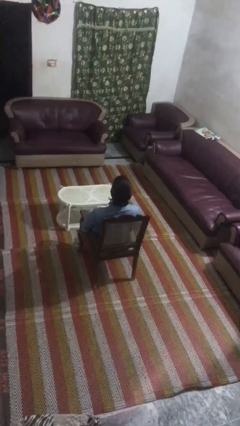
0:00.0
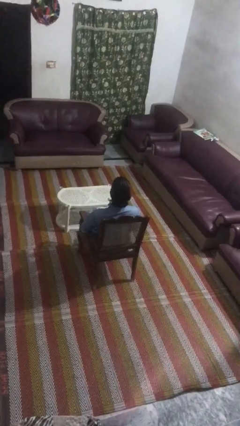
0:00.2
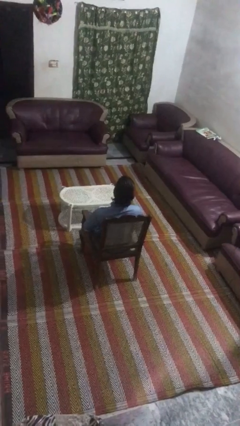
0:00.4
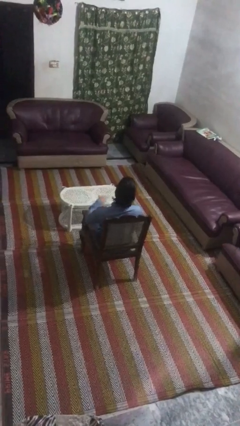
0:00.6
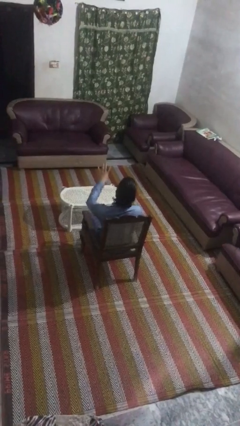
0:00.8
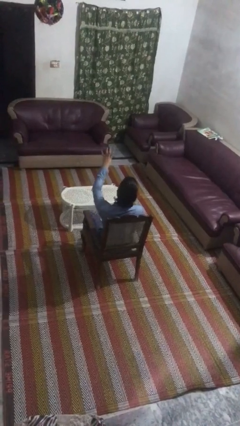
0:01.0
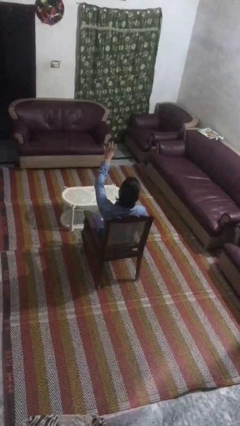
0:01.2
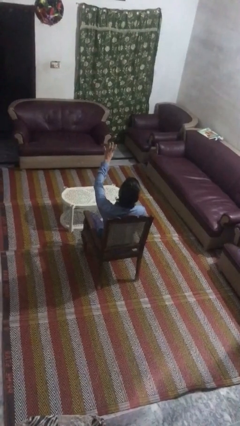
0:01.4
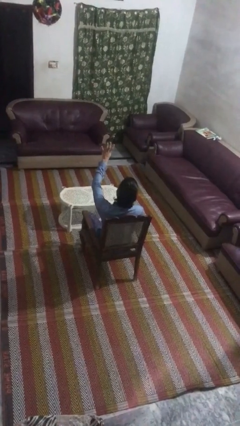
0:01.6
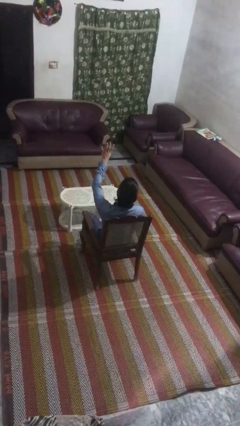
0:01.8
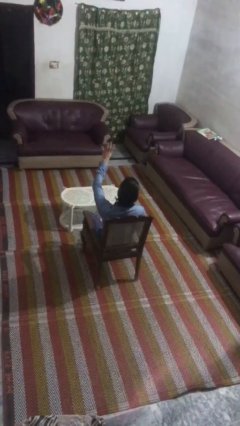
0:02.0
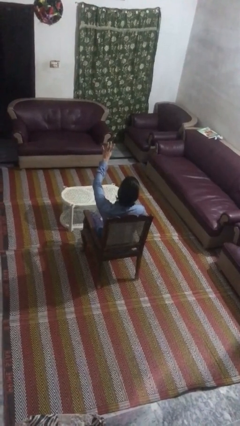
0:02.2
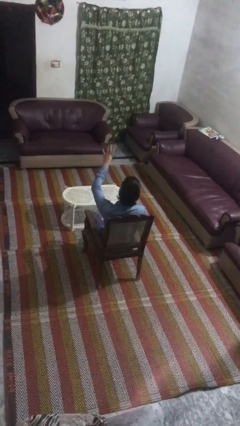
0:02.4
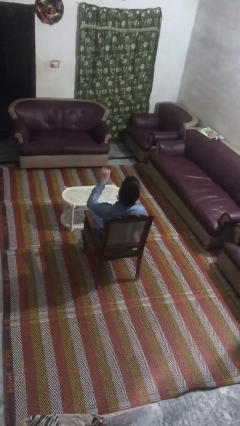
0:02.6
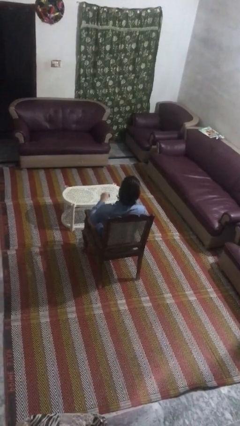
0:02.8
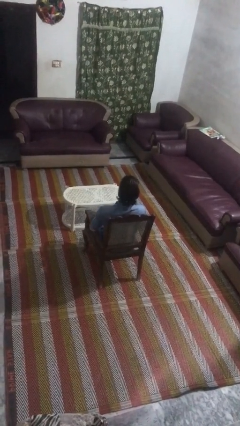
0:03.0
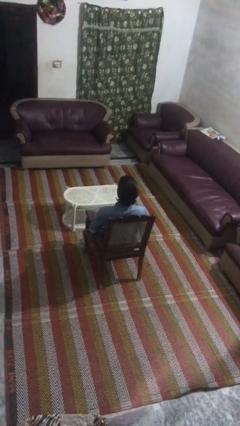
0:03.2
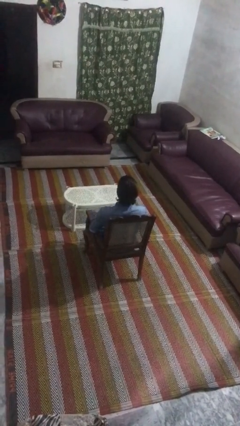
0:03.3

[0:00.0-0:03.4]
person gestures number four

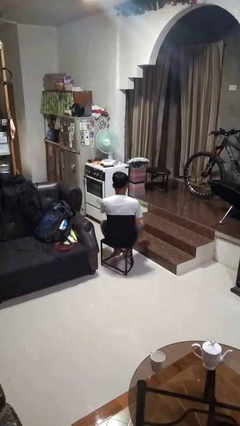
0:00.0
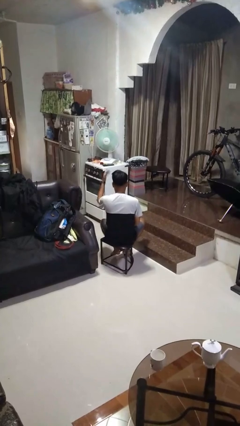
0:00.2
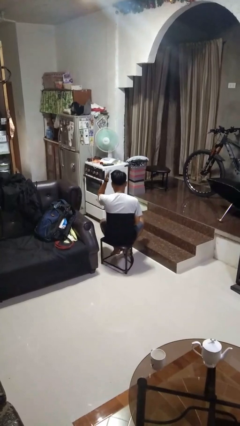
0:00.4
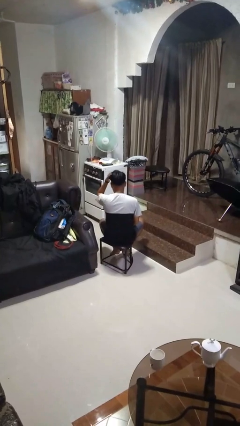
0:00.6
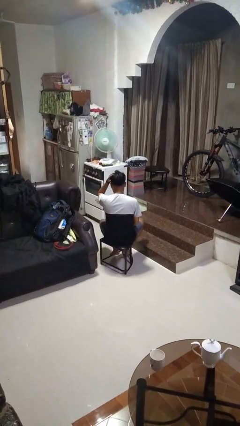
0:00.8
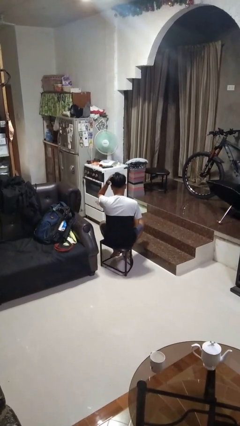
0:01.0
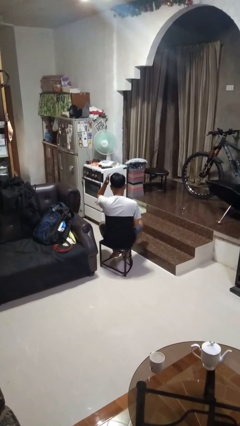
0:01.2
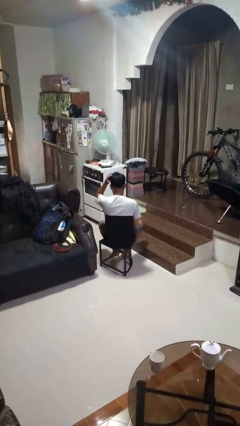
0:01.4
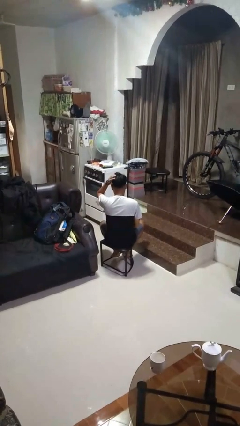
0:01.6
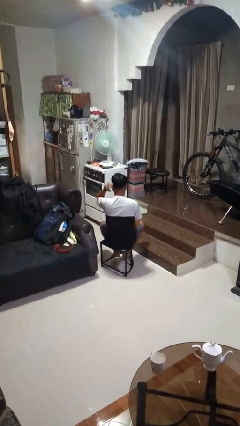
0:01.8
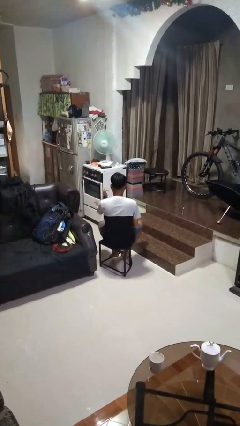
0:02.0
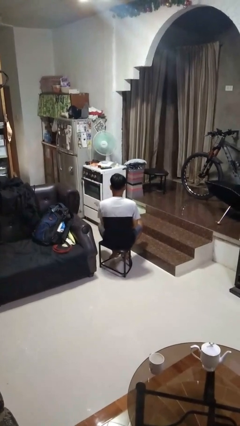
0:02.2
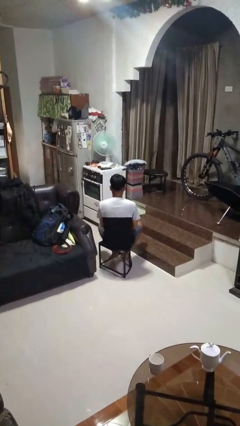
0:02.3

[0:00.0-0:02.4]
person pats head

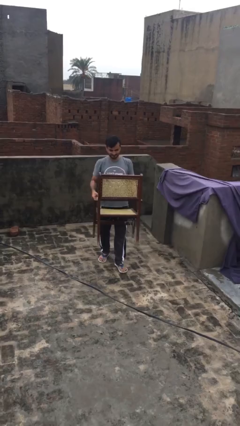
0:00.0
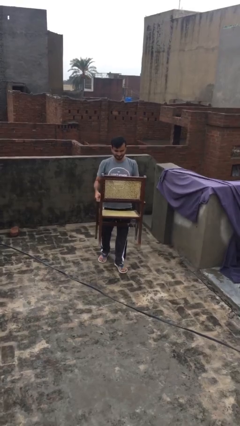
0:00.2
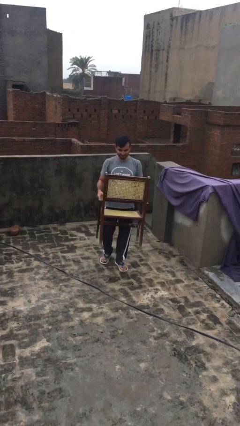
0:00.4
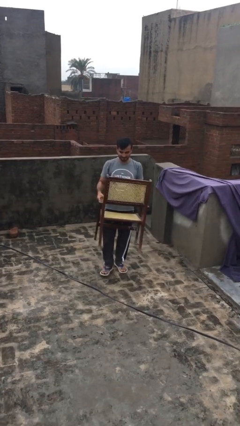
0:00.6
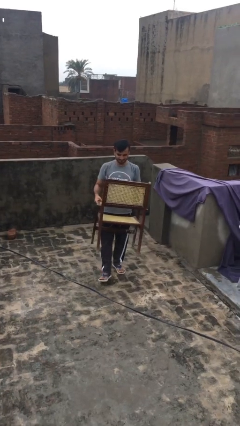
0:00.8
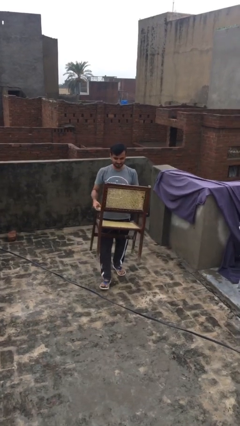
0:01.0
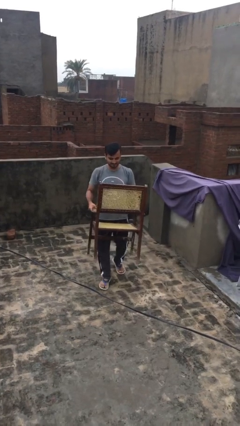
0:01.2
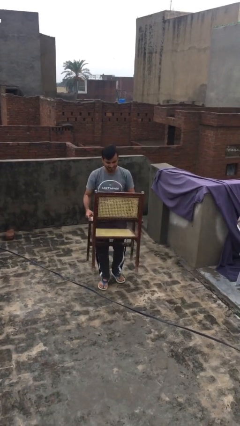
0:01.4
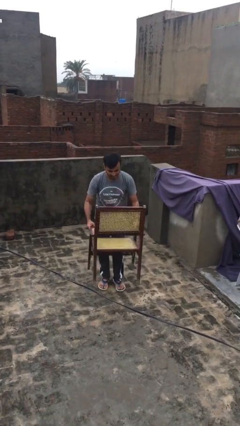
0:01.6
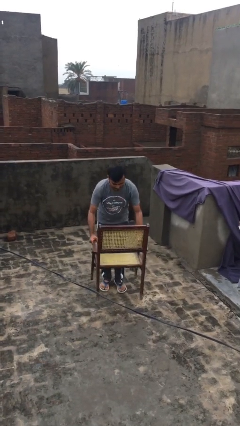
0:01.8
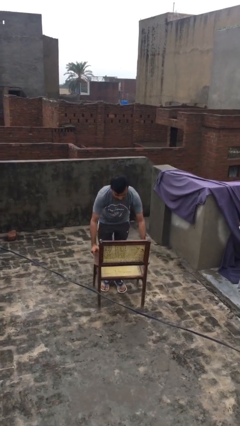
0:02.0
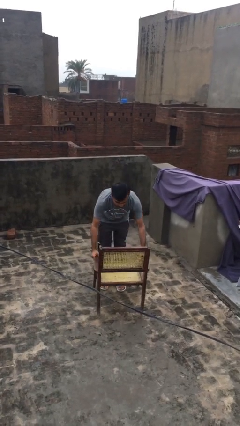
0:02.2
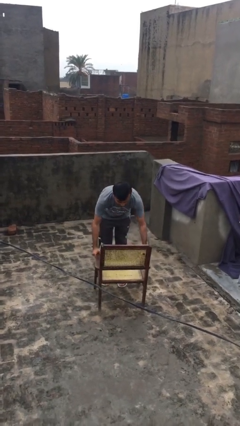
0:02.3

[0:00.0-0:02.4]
person puts down object on floor

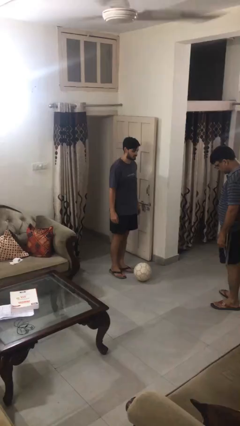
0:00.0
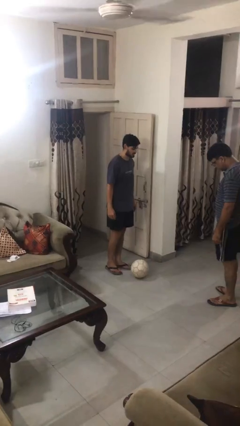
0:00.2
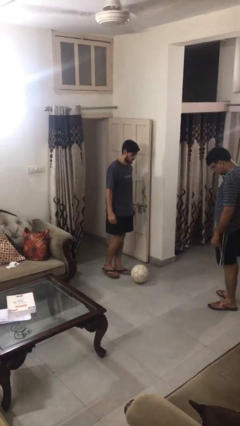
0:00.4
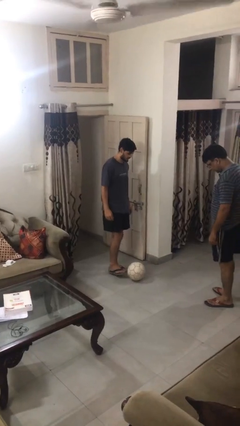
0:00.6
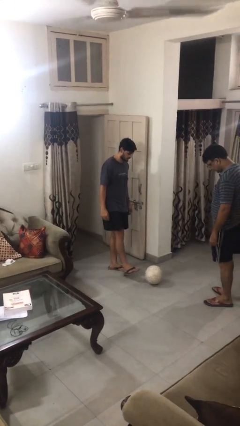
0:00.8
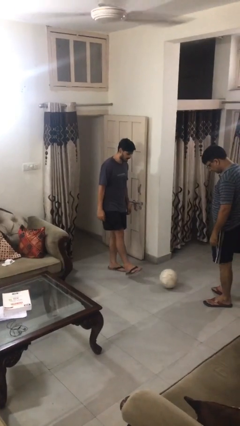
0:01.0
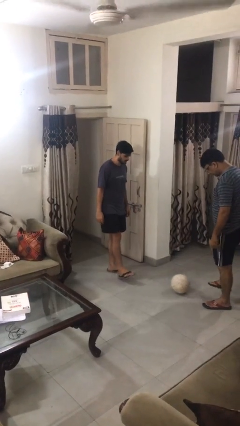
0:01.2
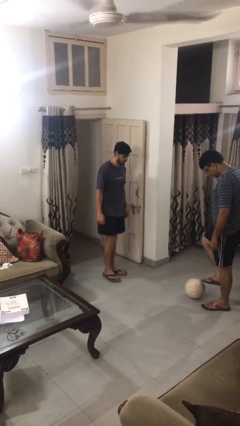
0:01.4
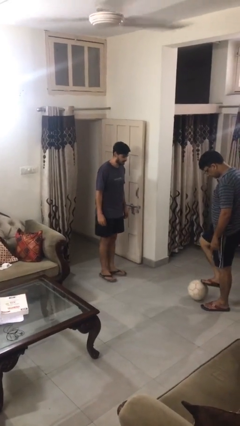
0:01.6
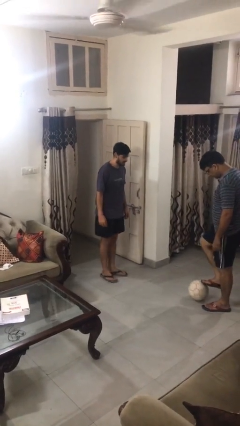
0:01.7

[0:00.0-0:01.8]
person kicks object to person

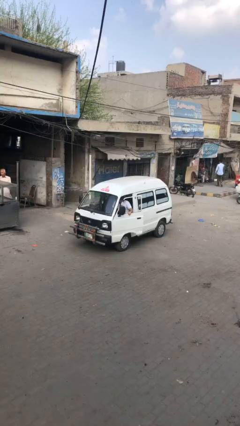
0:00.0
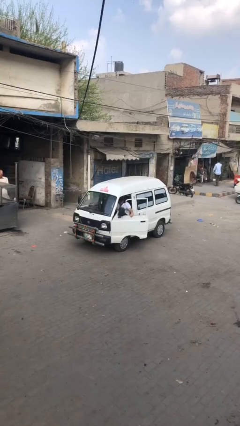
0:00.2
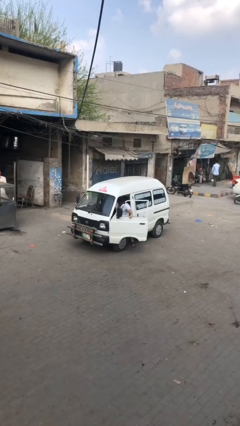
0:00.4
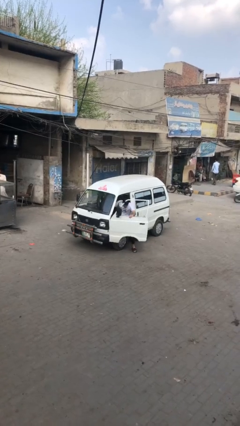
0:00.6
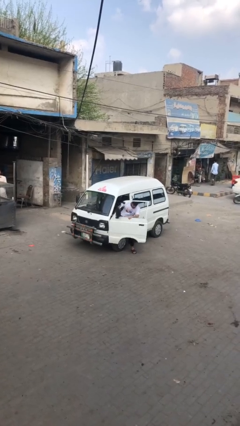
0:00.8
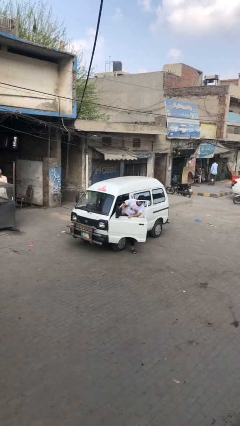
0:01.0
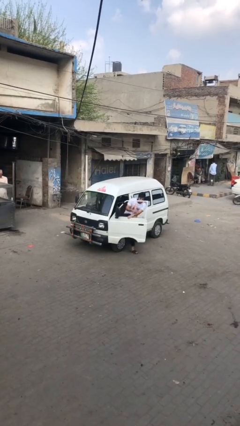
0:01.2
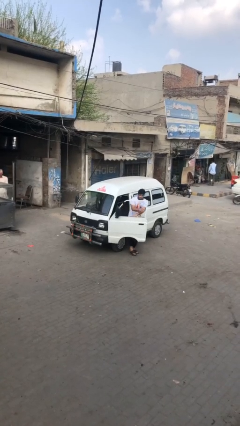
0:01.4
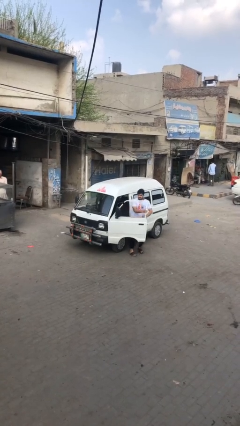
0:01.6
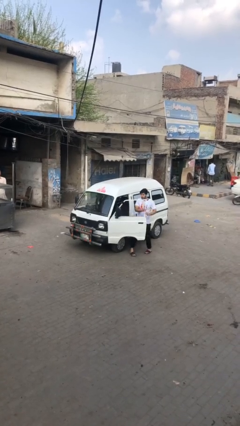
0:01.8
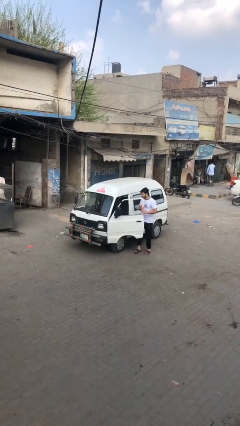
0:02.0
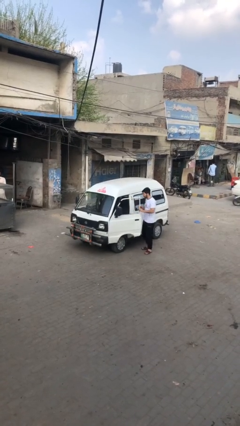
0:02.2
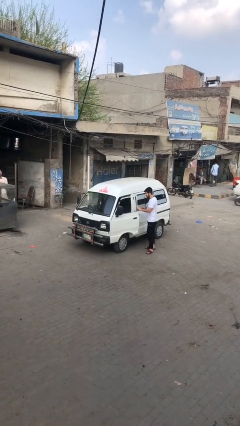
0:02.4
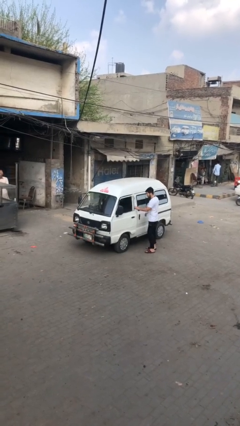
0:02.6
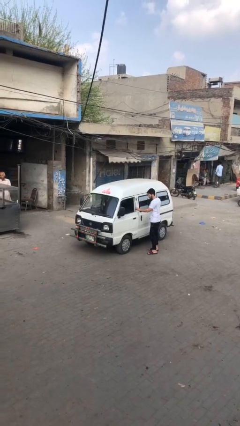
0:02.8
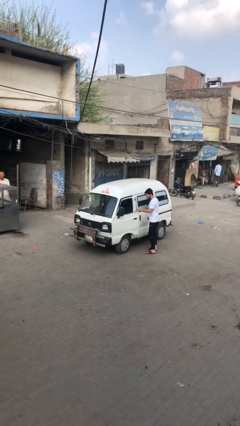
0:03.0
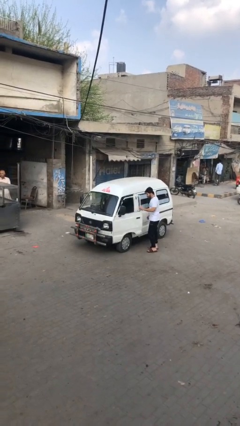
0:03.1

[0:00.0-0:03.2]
car drops off person

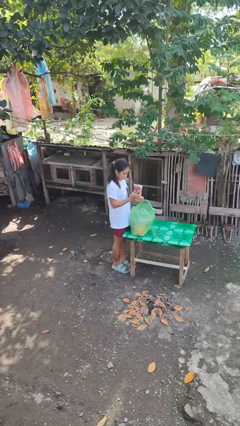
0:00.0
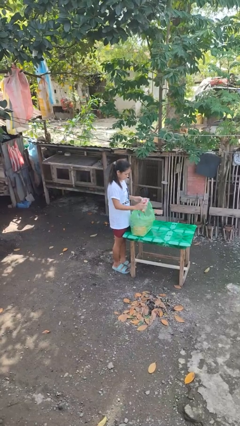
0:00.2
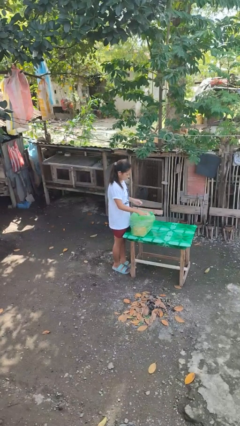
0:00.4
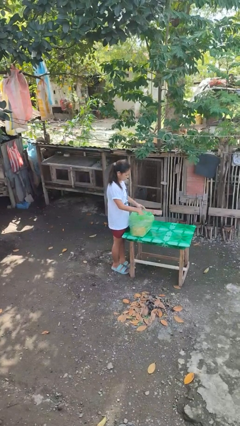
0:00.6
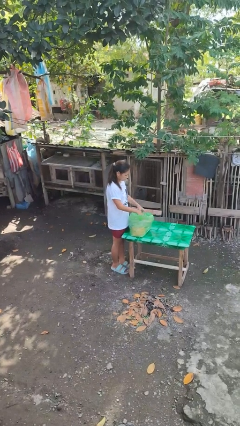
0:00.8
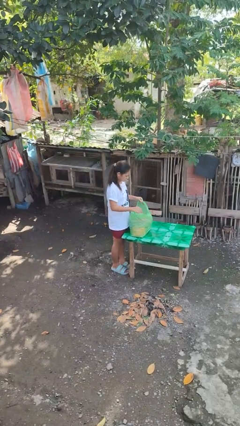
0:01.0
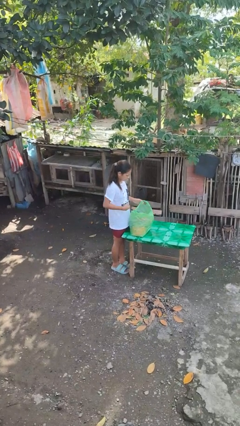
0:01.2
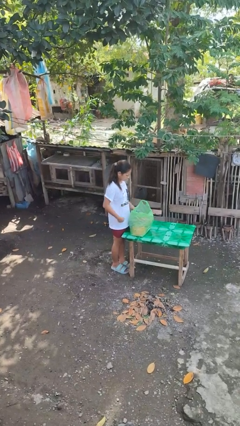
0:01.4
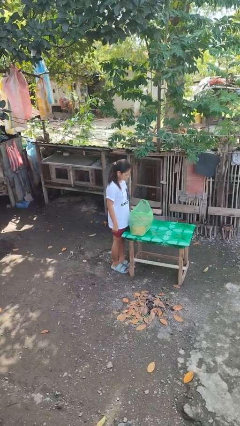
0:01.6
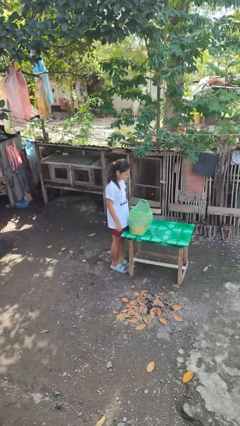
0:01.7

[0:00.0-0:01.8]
person puts object into bag

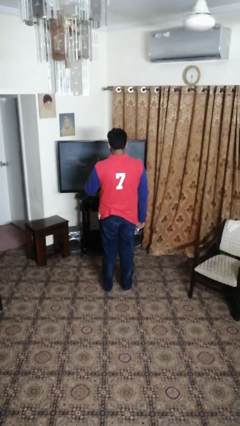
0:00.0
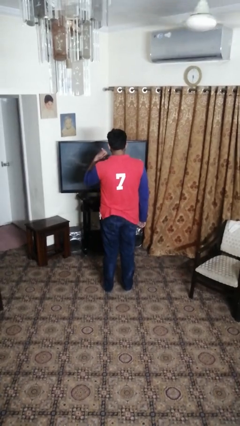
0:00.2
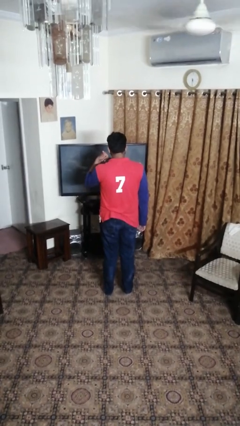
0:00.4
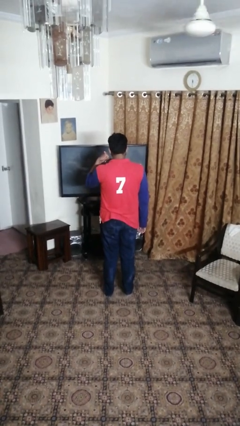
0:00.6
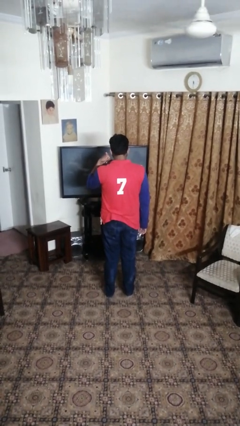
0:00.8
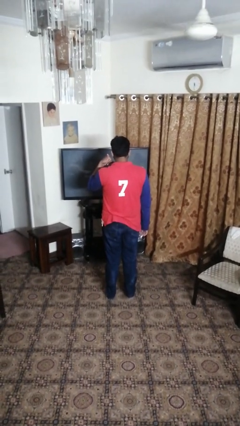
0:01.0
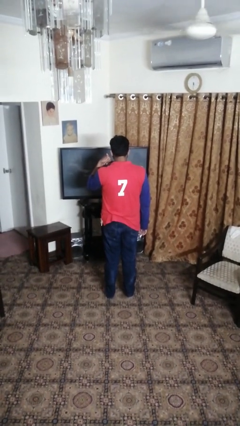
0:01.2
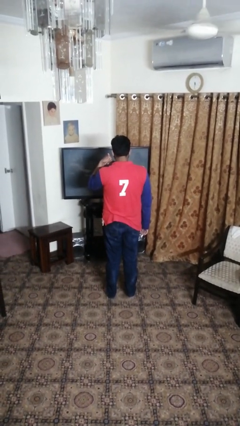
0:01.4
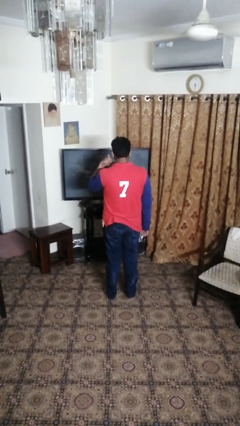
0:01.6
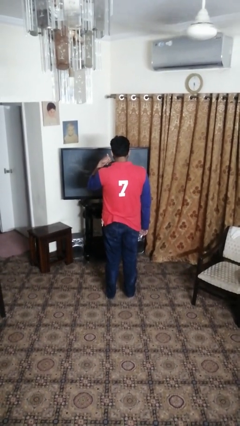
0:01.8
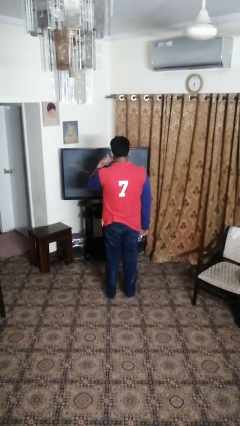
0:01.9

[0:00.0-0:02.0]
person gestures call me
